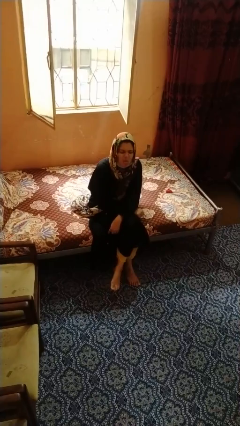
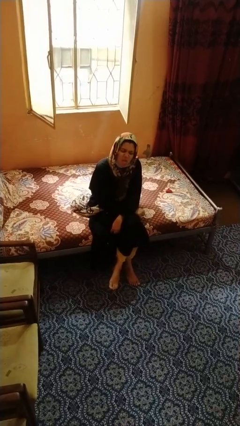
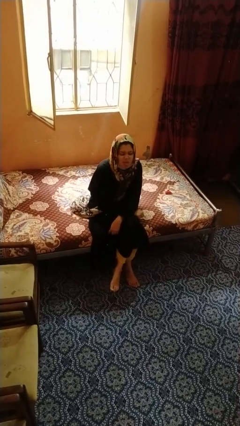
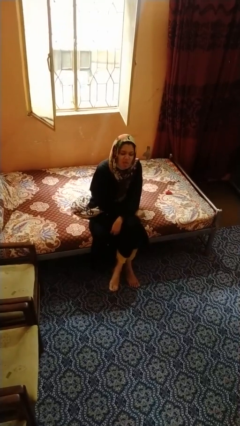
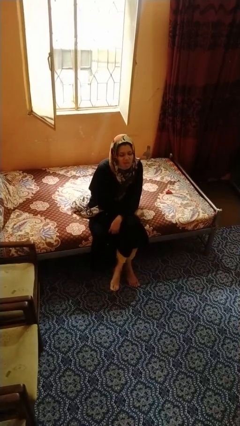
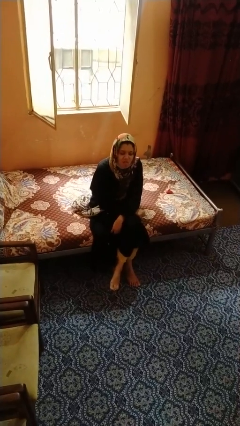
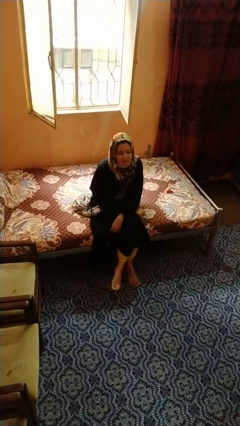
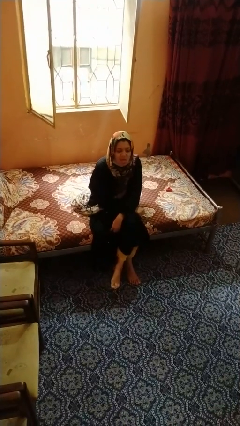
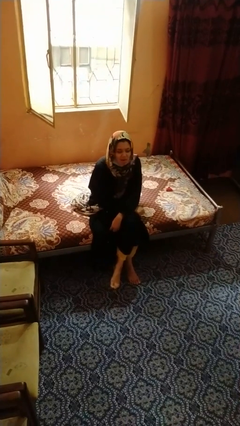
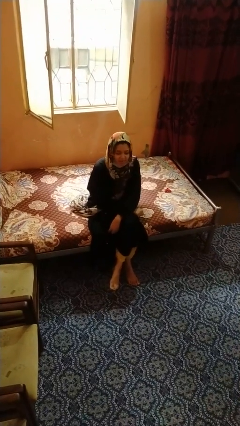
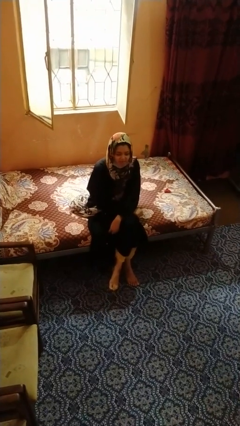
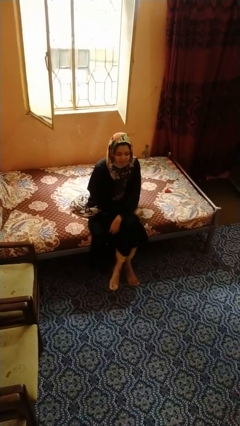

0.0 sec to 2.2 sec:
person sticks out tongue

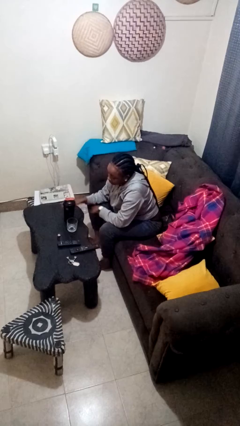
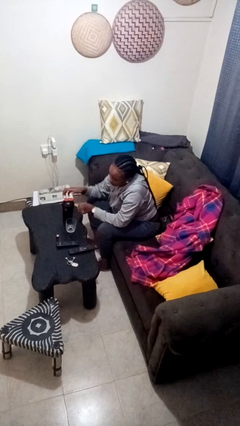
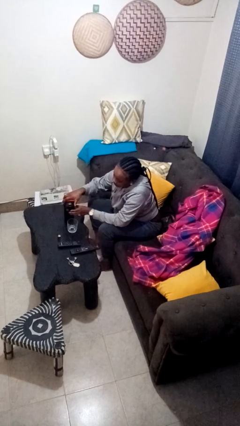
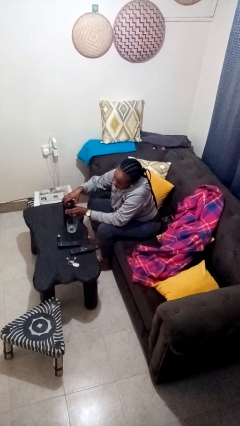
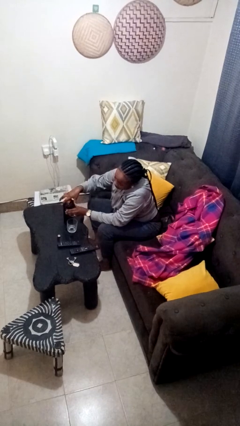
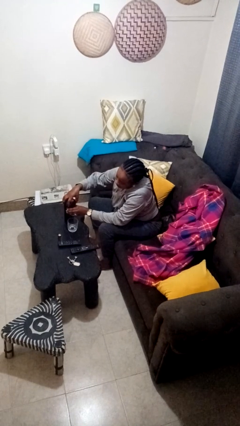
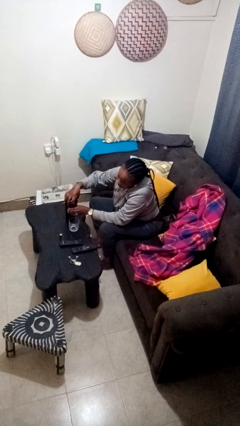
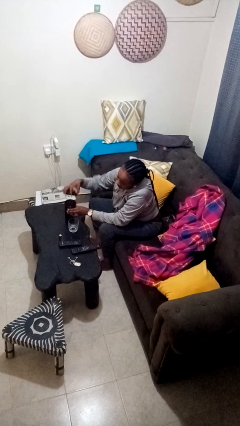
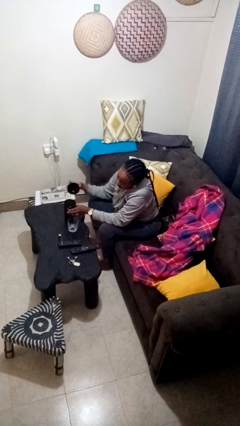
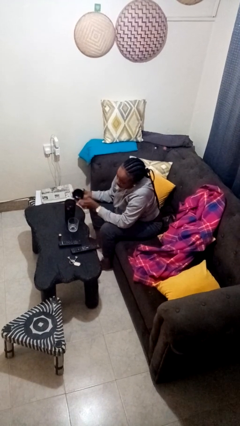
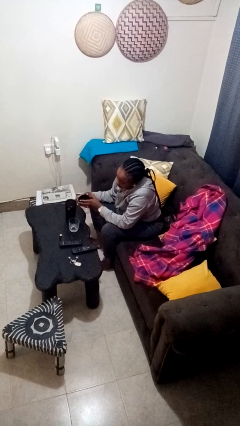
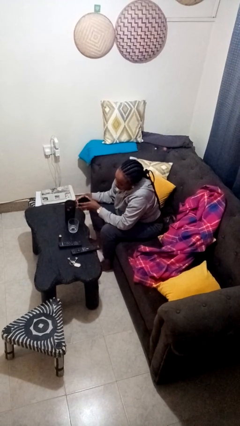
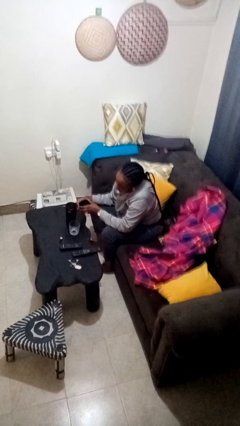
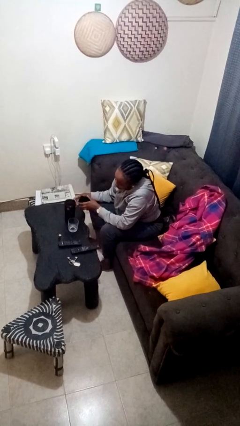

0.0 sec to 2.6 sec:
person unscrews lid from bottle

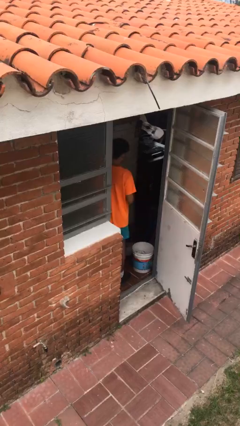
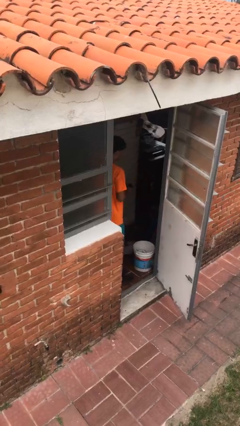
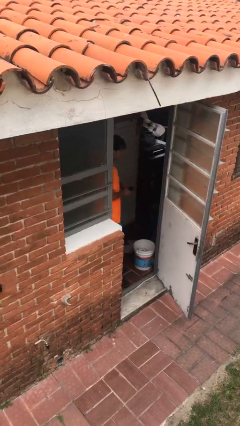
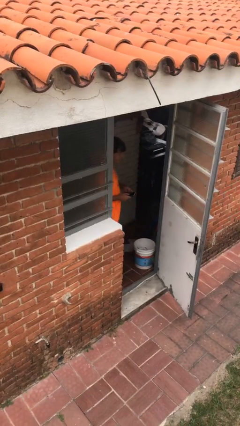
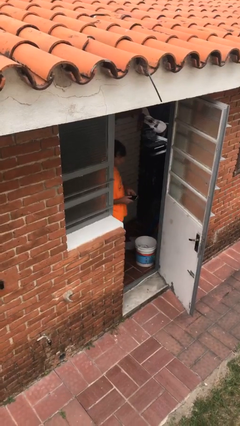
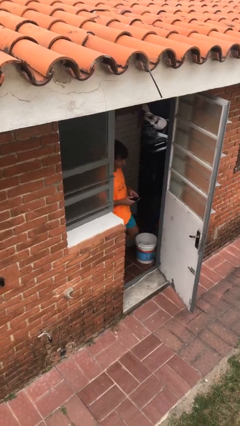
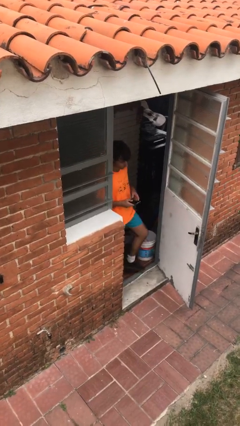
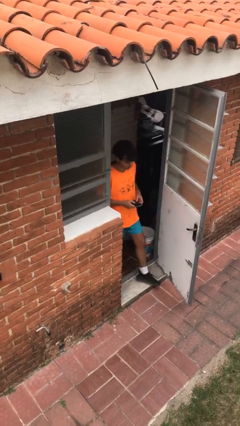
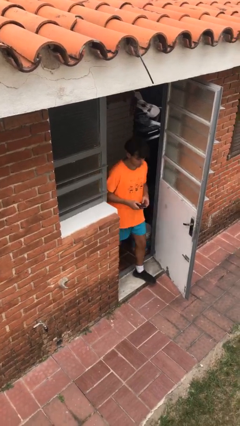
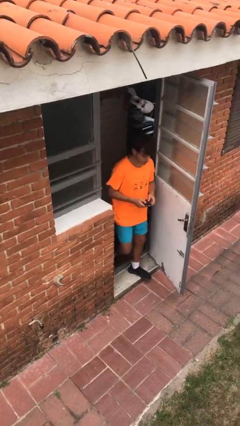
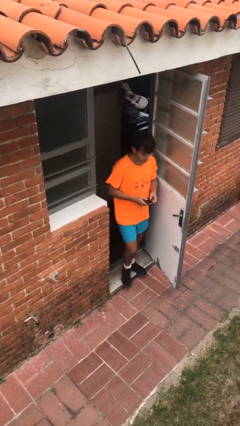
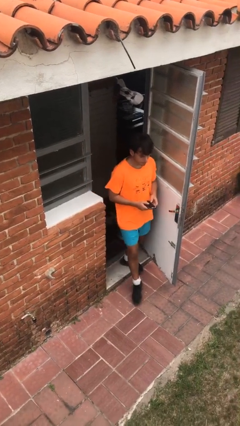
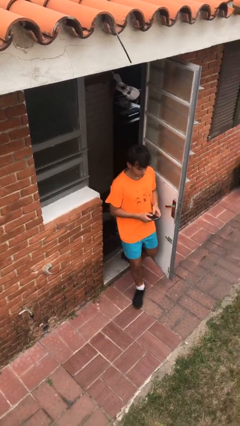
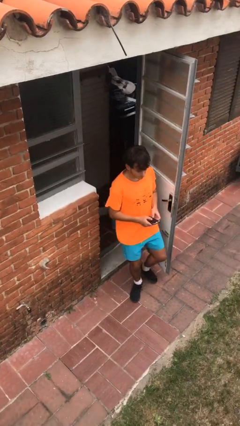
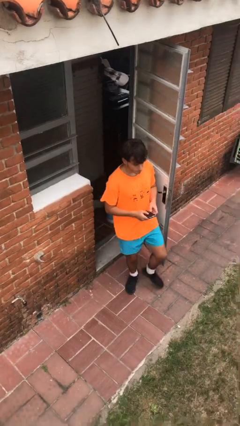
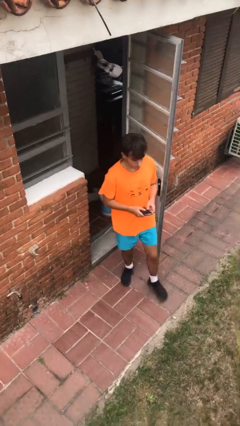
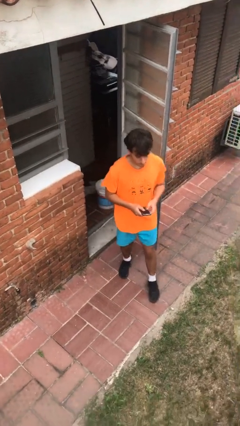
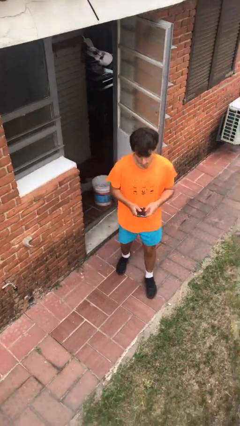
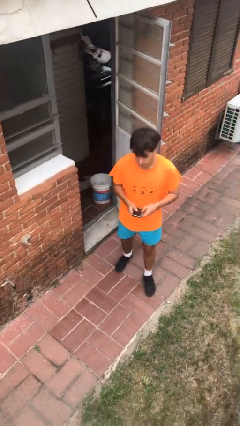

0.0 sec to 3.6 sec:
person enters scene through structure

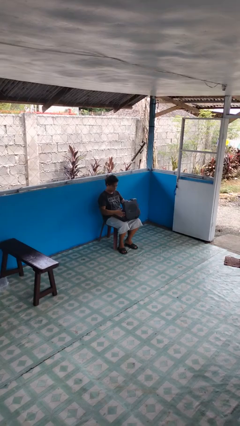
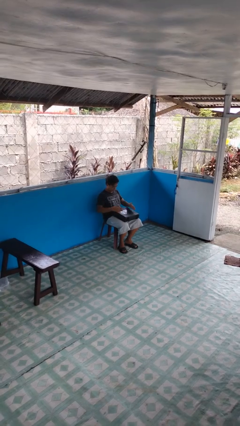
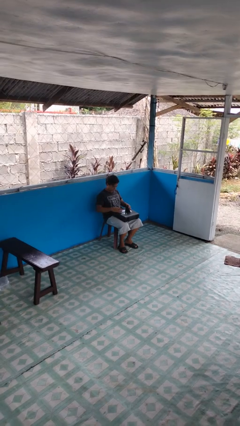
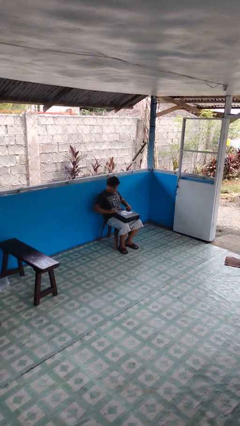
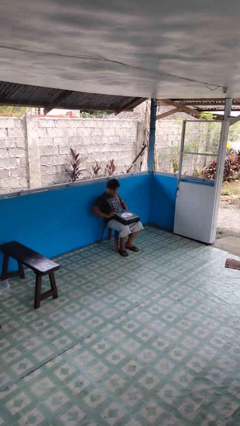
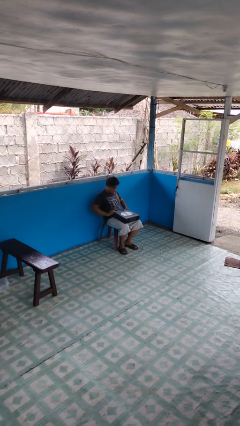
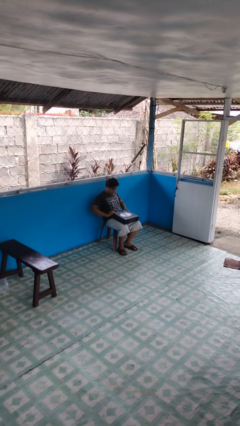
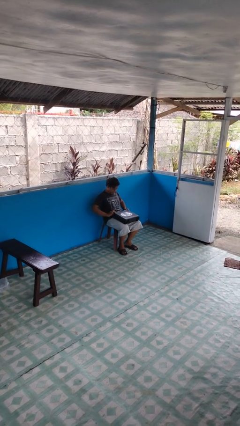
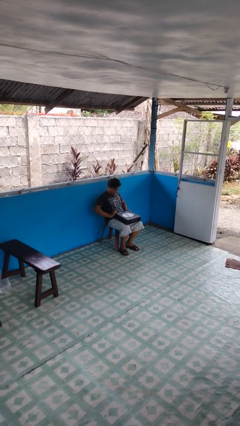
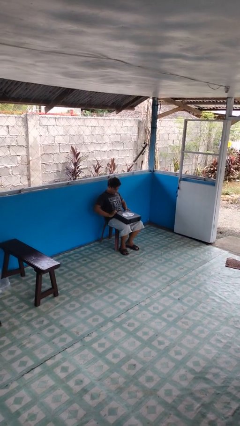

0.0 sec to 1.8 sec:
person closes suitcase

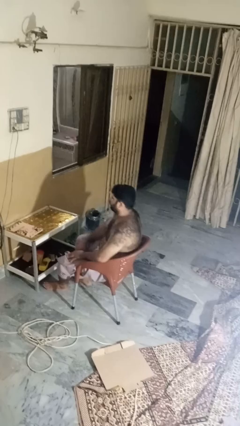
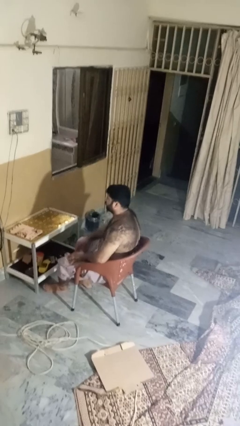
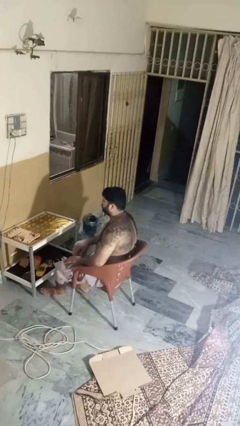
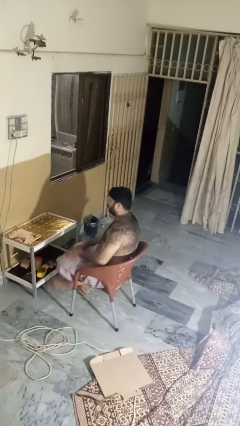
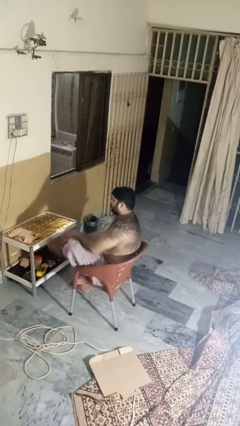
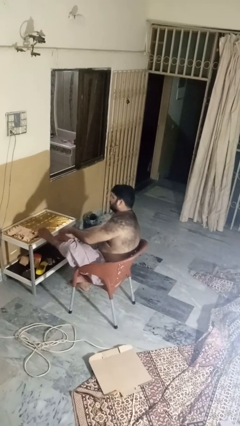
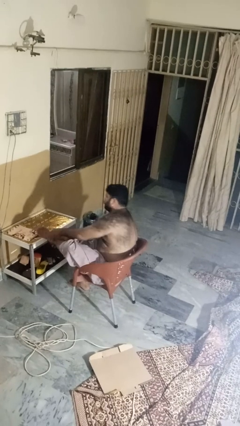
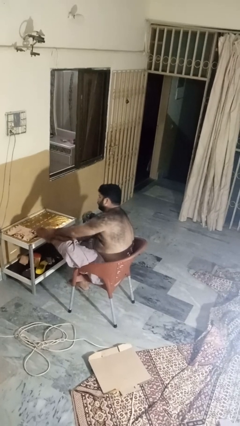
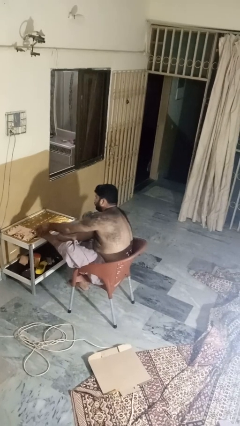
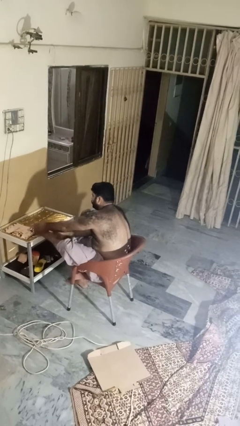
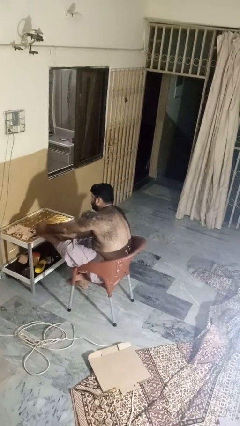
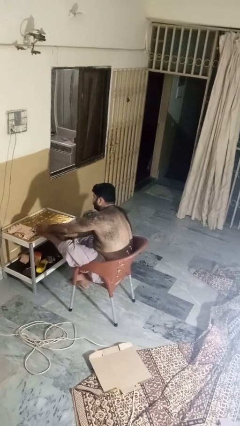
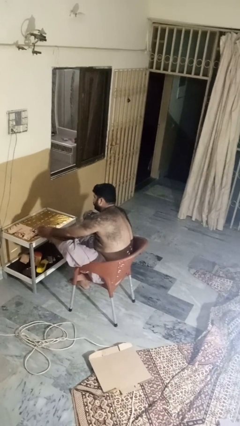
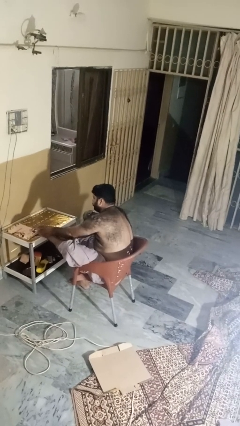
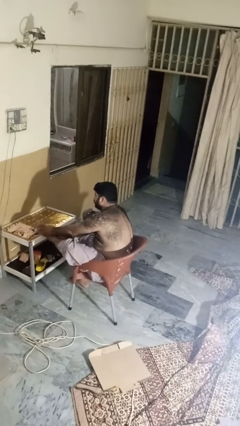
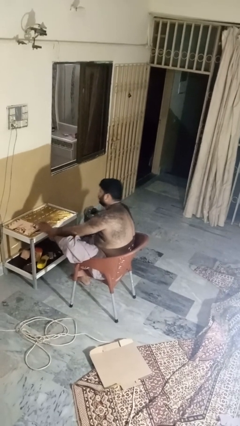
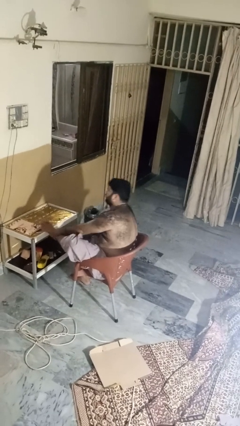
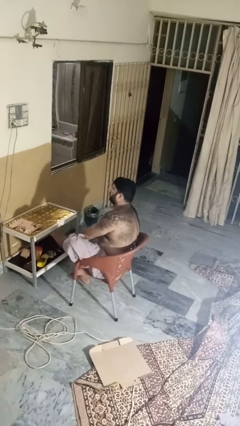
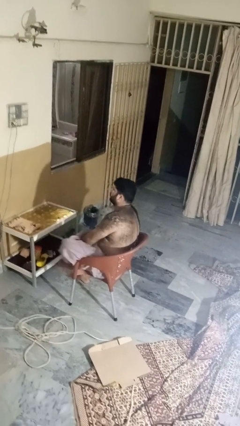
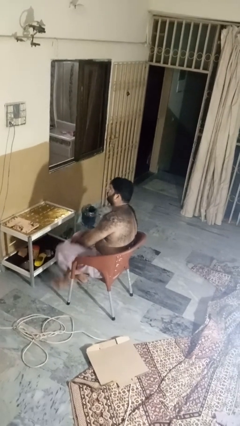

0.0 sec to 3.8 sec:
person stubs toe

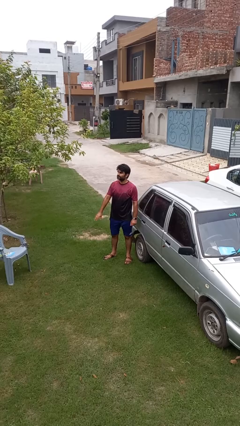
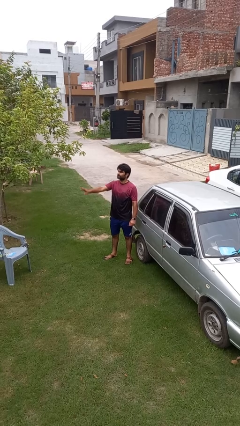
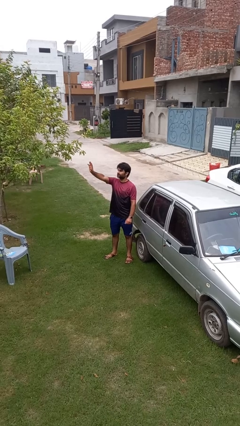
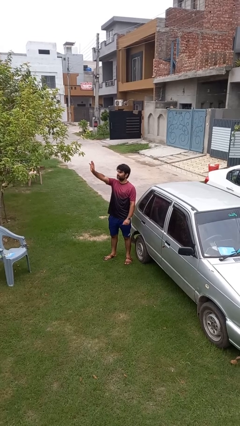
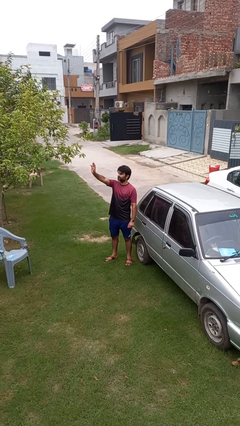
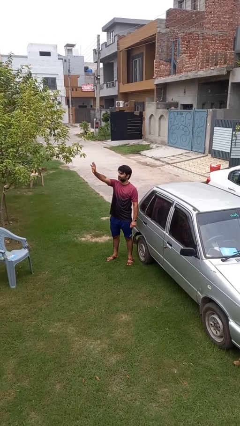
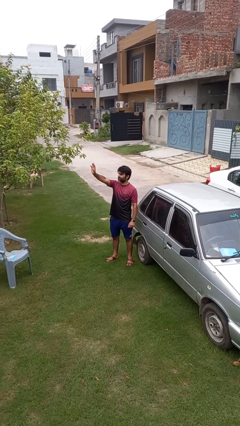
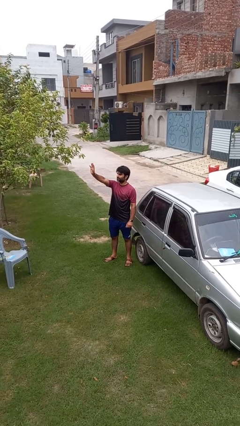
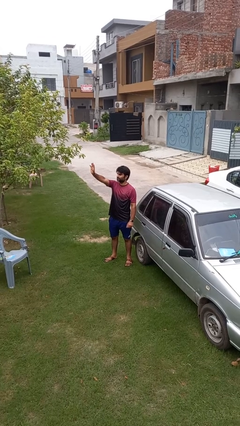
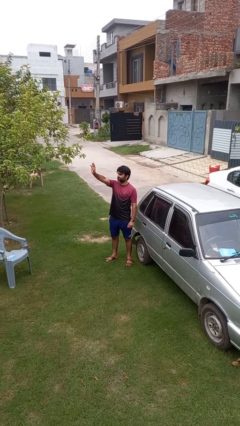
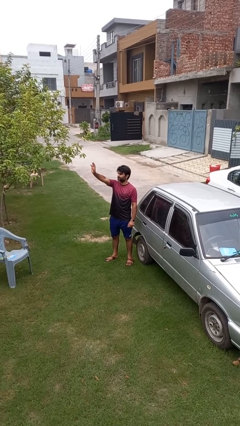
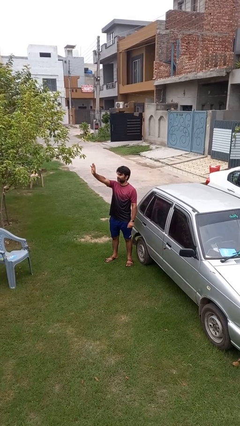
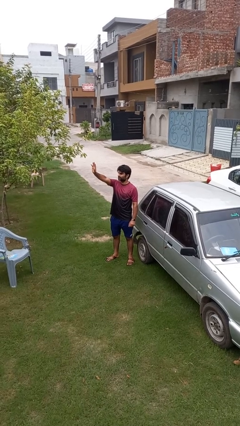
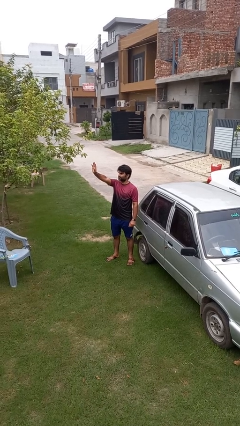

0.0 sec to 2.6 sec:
person gestures raise hand
